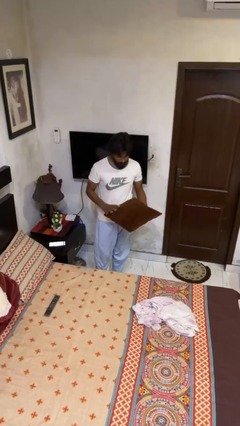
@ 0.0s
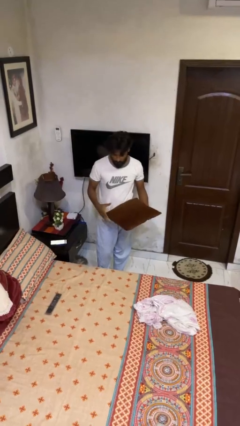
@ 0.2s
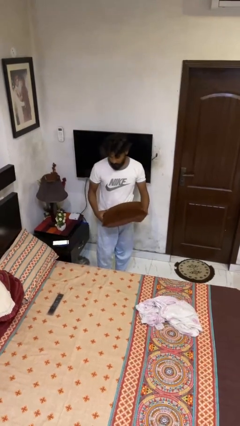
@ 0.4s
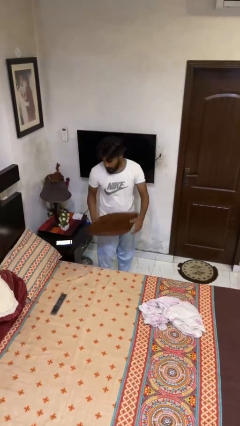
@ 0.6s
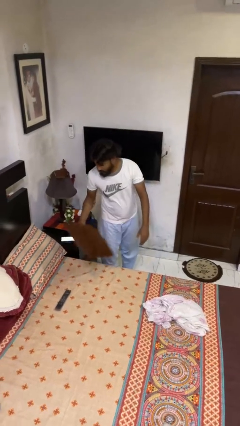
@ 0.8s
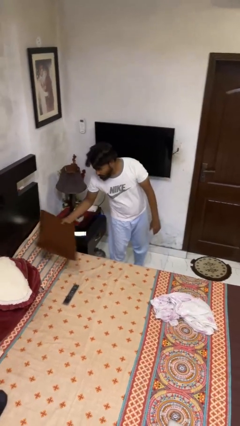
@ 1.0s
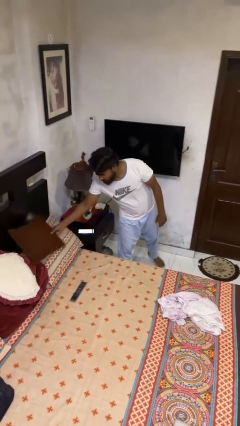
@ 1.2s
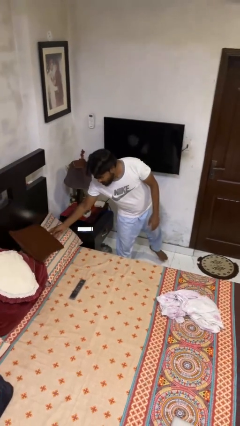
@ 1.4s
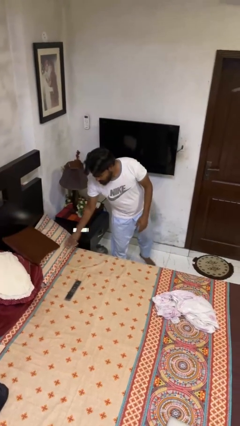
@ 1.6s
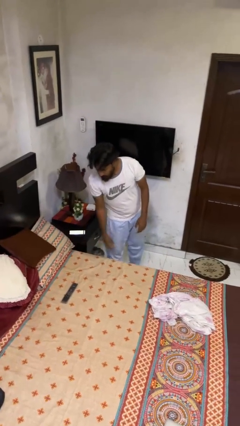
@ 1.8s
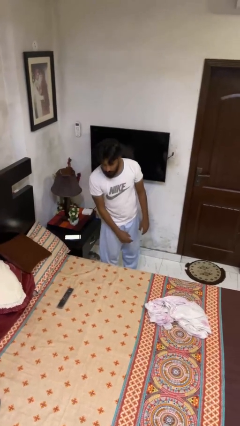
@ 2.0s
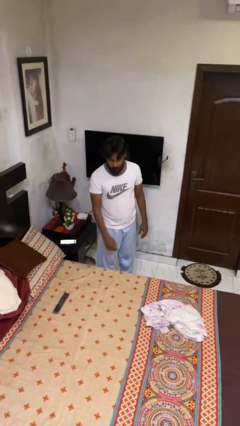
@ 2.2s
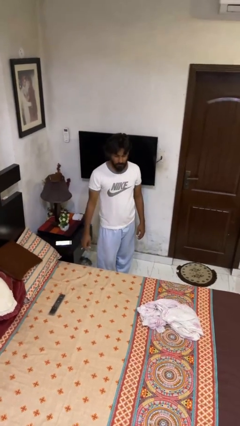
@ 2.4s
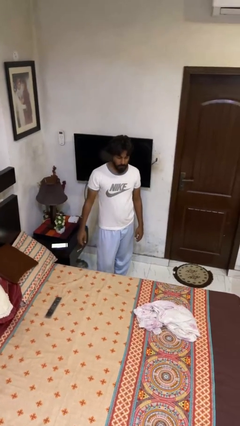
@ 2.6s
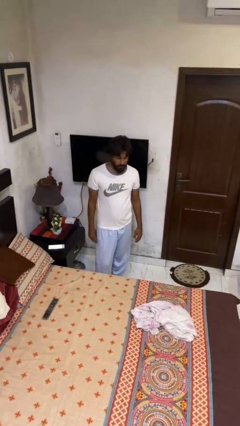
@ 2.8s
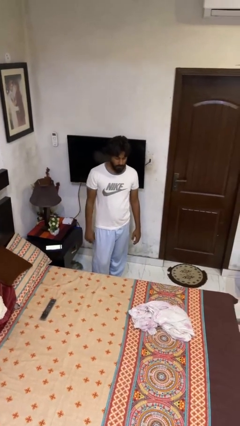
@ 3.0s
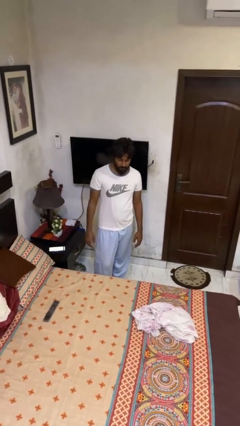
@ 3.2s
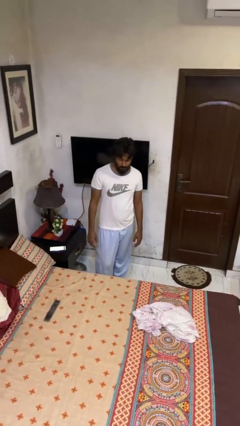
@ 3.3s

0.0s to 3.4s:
person puts down object on bed

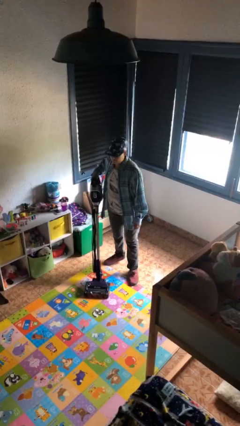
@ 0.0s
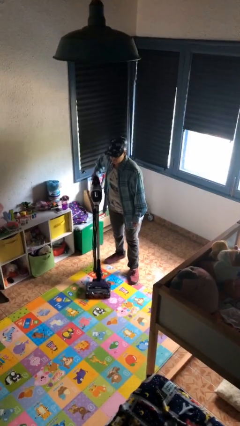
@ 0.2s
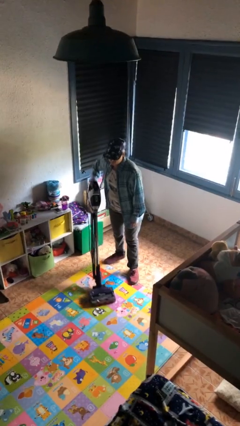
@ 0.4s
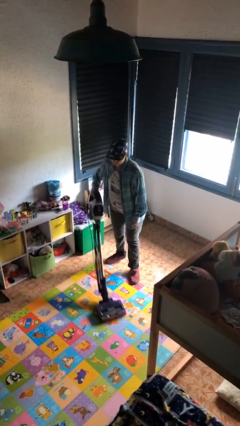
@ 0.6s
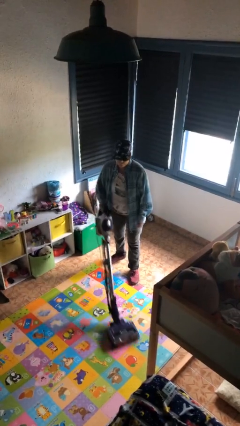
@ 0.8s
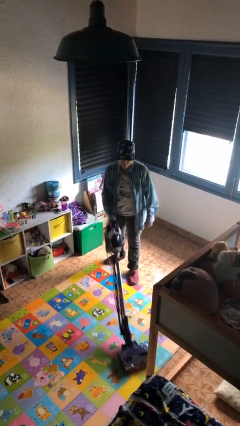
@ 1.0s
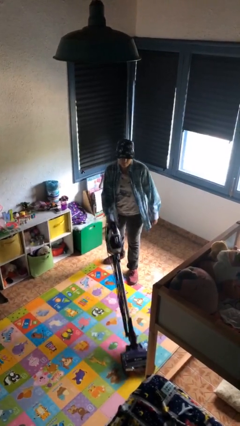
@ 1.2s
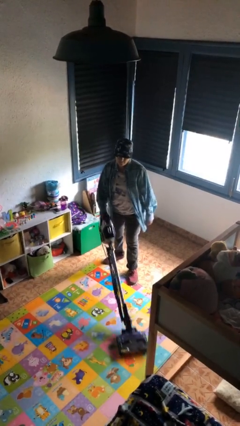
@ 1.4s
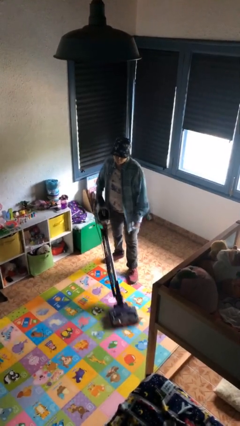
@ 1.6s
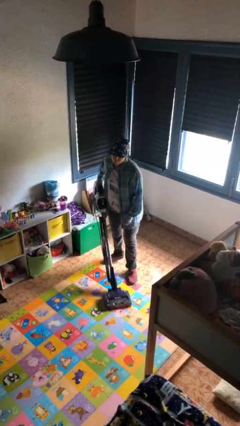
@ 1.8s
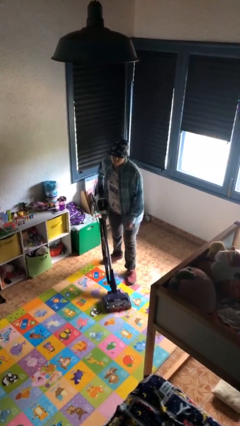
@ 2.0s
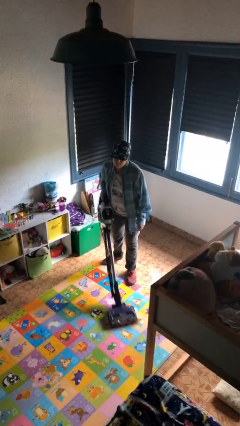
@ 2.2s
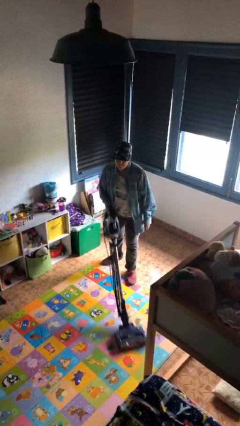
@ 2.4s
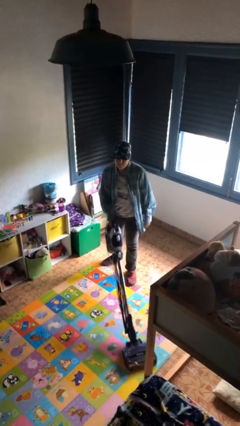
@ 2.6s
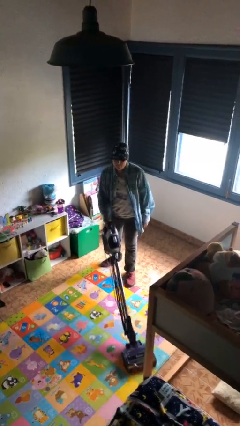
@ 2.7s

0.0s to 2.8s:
person vacuums carpet

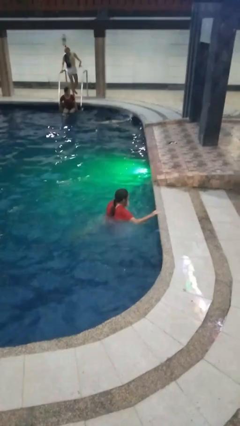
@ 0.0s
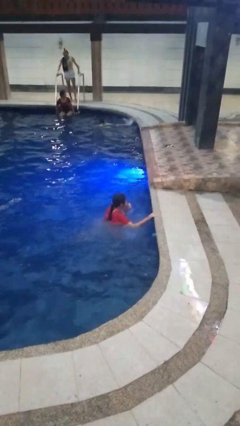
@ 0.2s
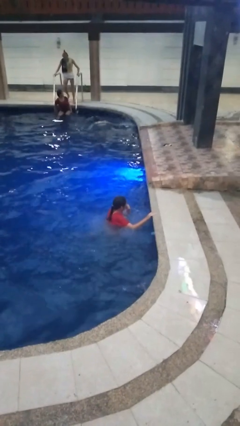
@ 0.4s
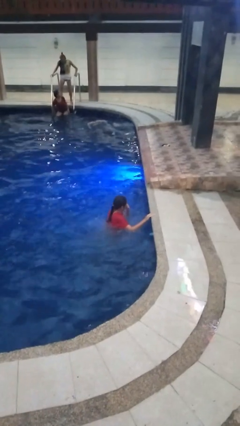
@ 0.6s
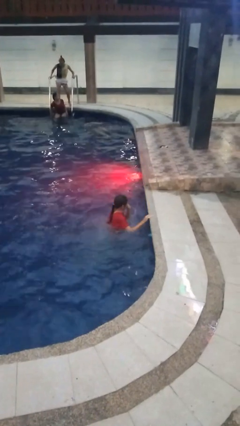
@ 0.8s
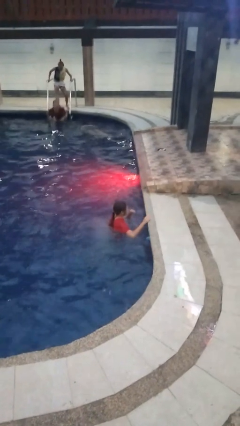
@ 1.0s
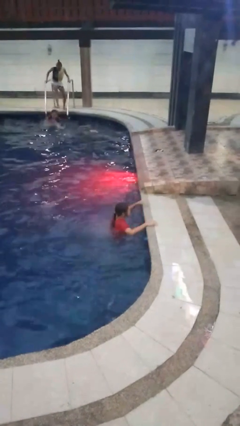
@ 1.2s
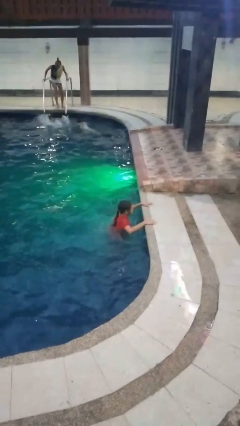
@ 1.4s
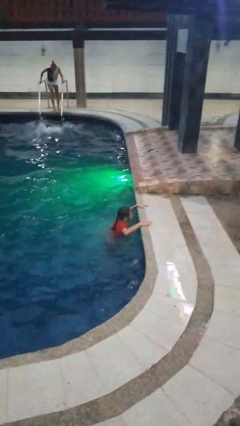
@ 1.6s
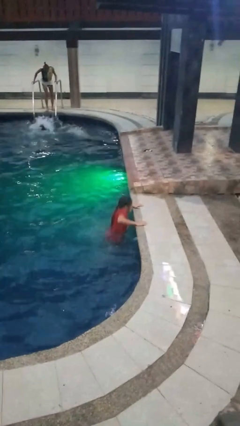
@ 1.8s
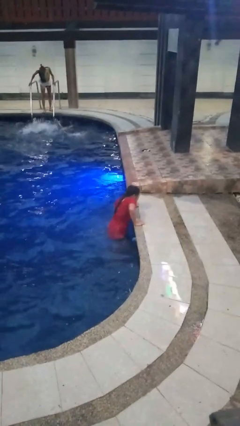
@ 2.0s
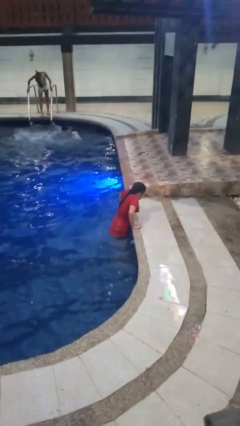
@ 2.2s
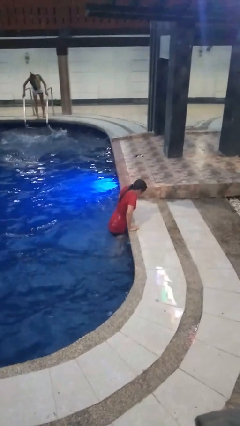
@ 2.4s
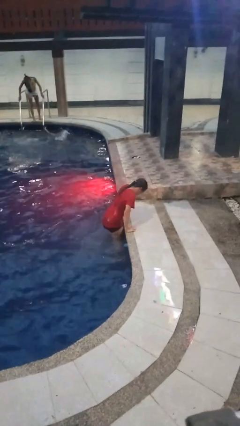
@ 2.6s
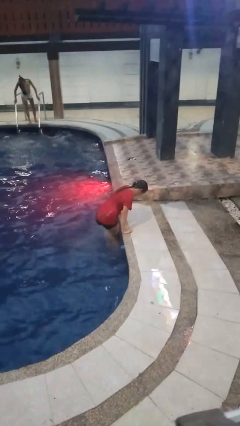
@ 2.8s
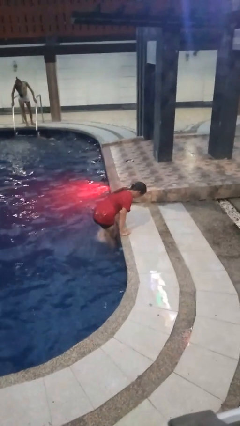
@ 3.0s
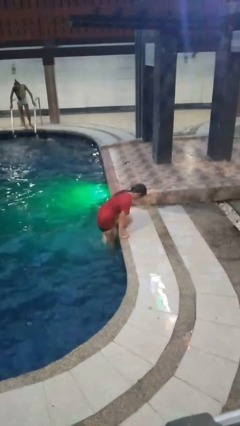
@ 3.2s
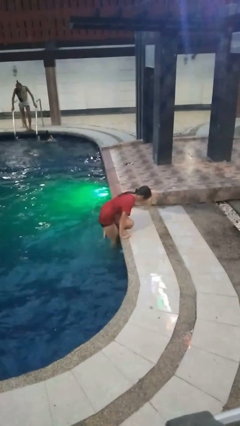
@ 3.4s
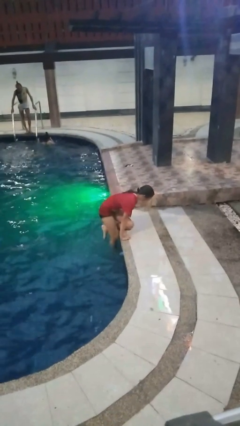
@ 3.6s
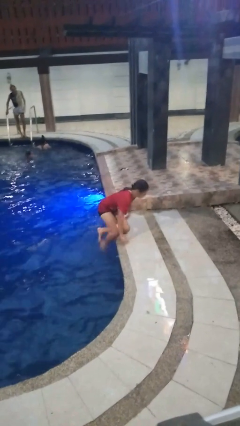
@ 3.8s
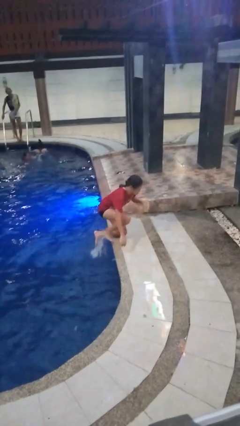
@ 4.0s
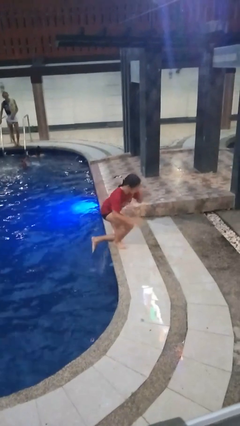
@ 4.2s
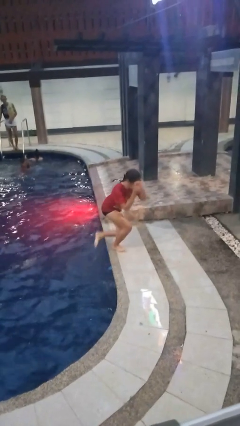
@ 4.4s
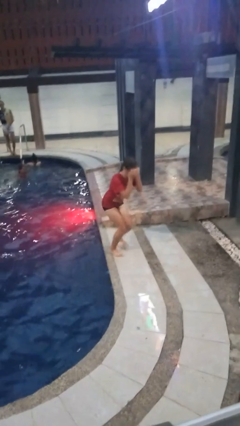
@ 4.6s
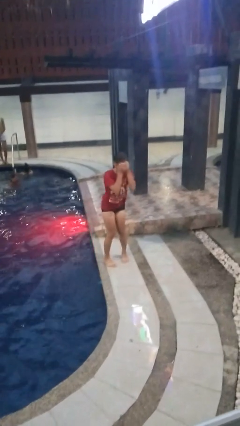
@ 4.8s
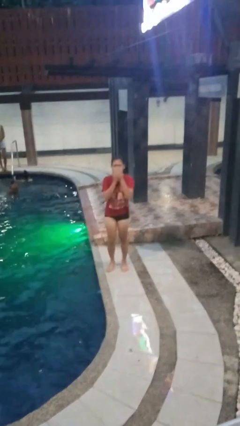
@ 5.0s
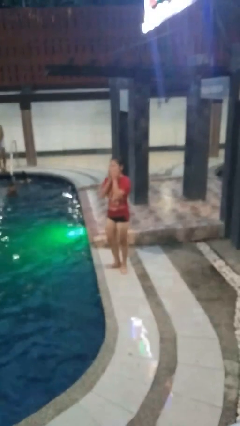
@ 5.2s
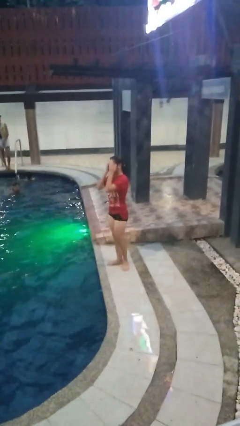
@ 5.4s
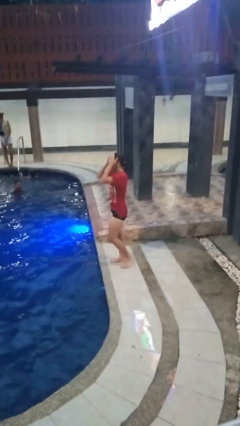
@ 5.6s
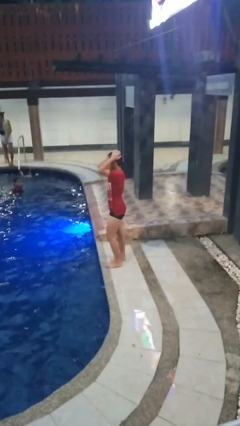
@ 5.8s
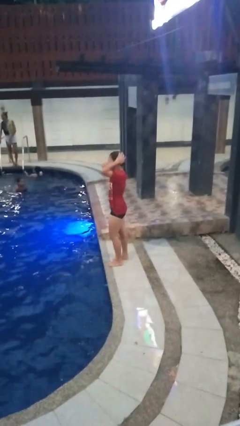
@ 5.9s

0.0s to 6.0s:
person exits pool

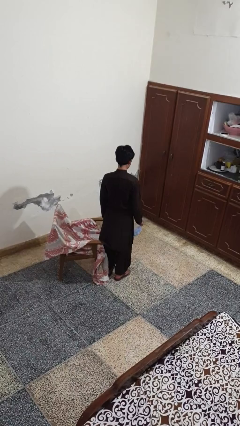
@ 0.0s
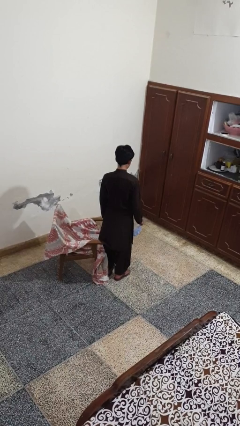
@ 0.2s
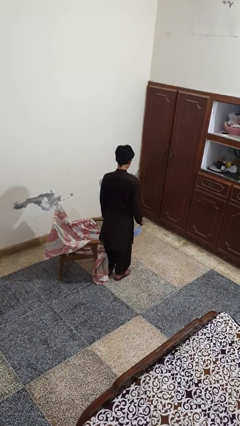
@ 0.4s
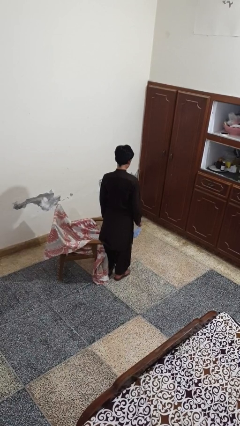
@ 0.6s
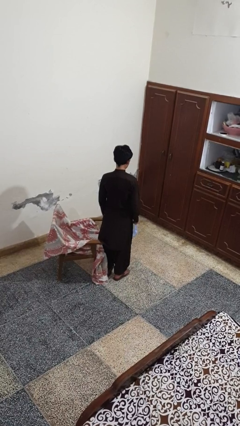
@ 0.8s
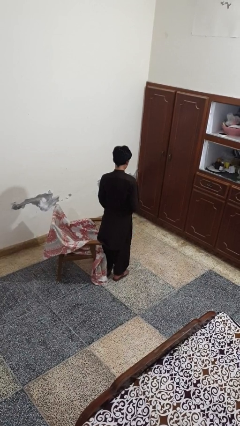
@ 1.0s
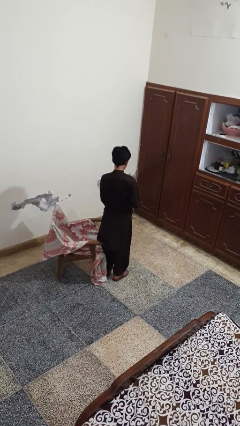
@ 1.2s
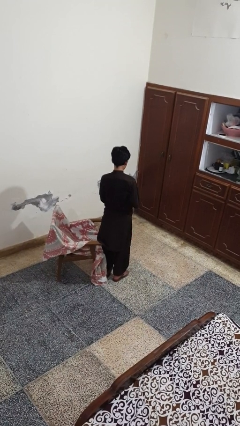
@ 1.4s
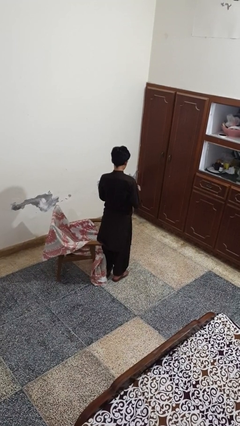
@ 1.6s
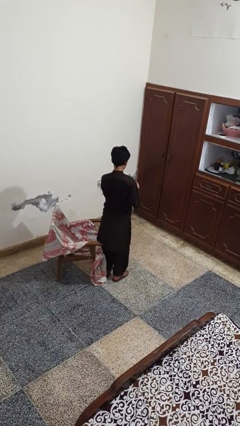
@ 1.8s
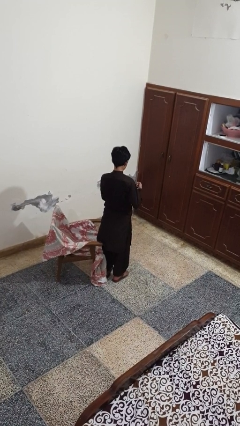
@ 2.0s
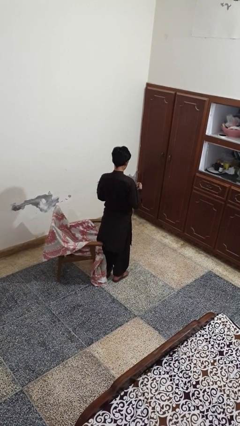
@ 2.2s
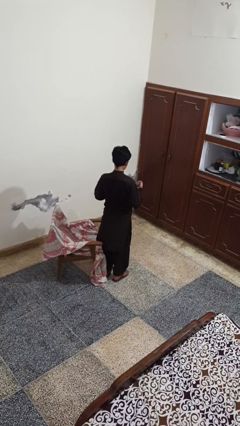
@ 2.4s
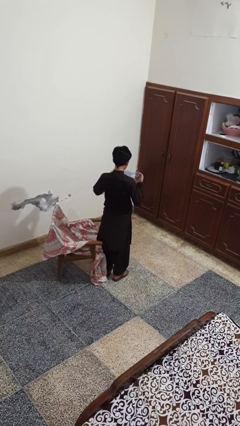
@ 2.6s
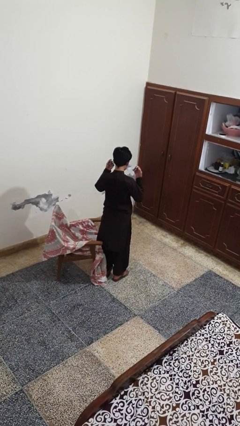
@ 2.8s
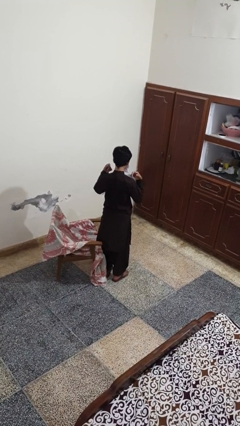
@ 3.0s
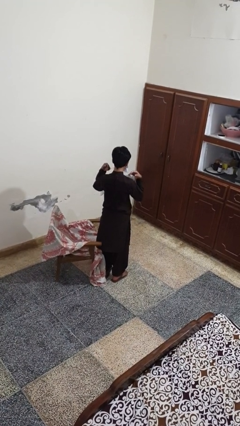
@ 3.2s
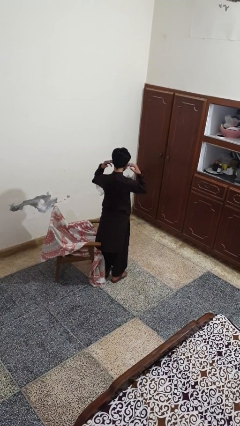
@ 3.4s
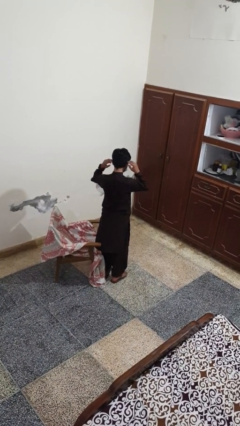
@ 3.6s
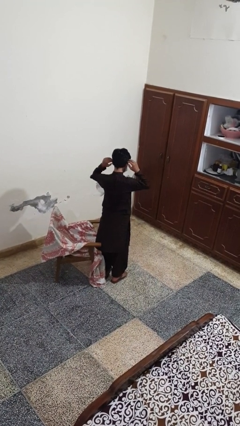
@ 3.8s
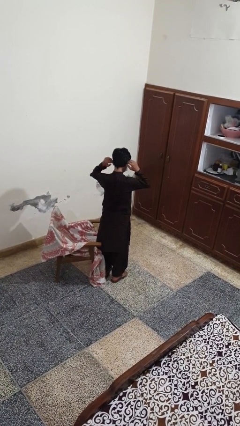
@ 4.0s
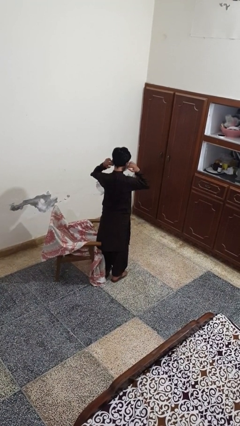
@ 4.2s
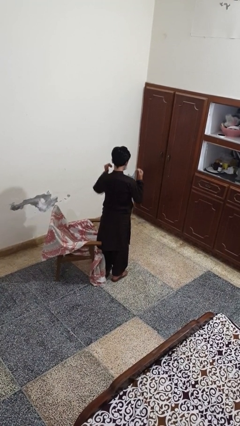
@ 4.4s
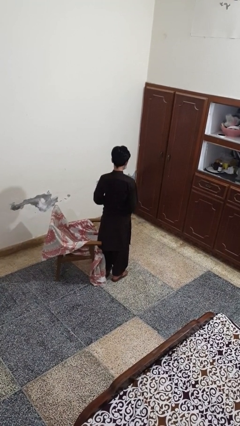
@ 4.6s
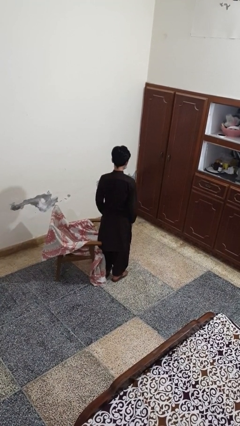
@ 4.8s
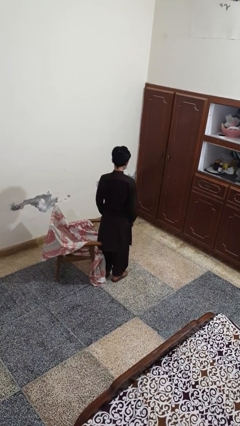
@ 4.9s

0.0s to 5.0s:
person puts on facemask

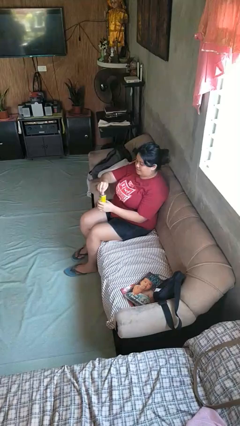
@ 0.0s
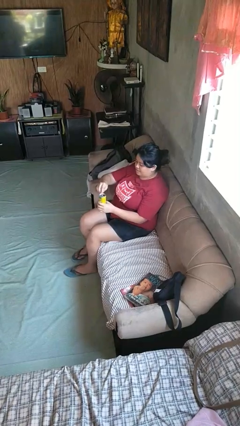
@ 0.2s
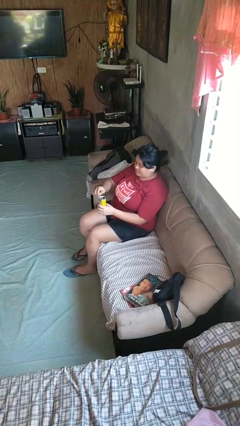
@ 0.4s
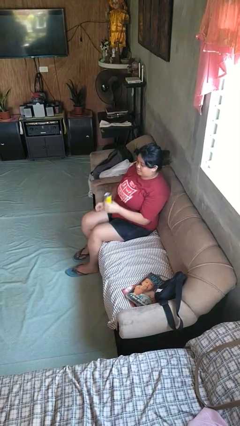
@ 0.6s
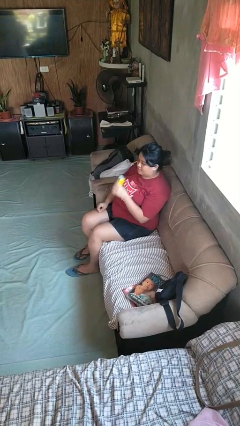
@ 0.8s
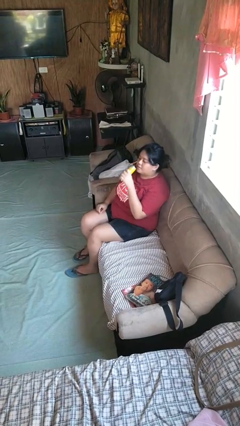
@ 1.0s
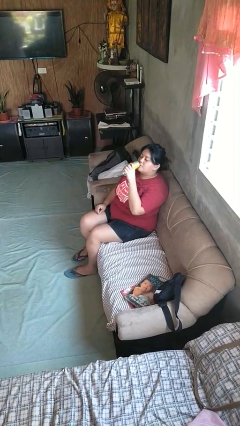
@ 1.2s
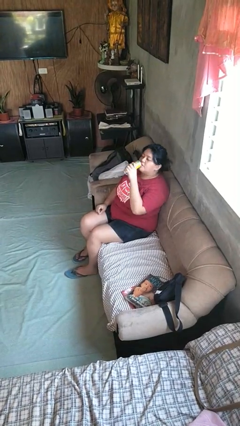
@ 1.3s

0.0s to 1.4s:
person drinks from beverage can
